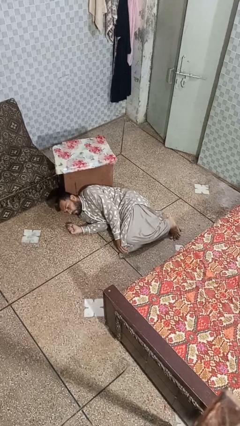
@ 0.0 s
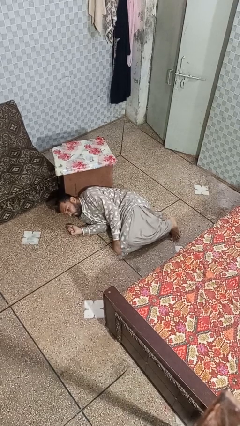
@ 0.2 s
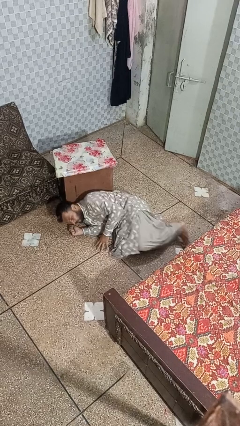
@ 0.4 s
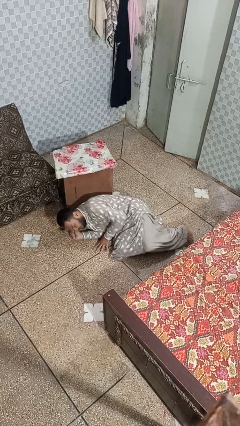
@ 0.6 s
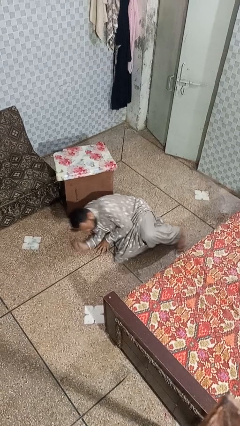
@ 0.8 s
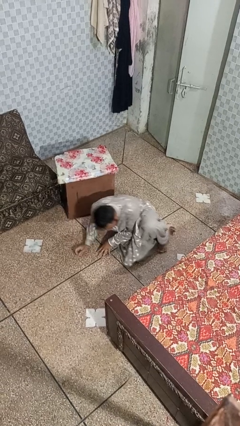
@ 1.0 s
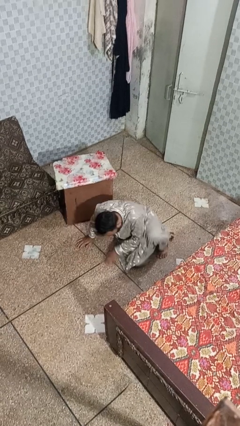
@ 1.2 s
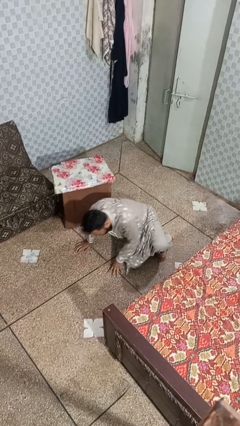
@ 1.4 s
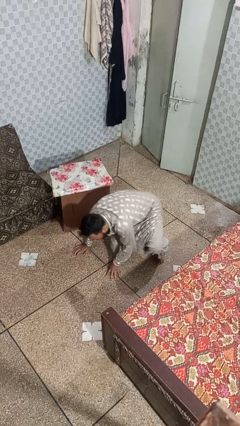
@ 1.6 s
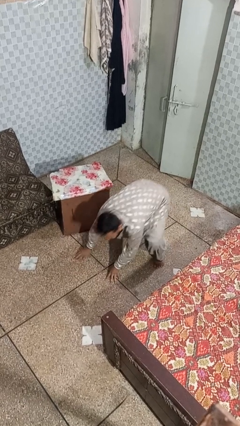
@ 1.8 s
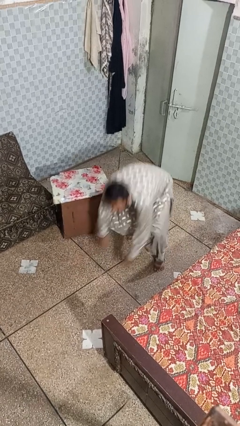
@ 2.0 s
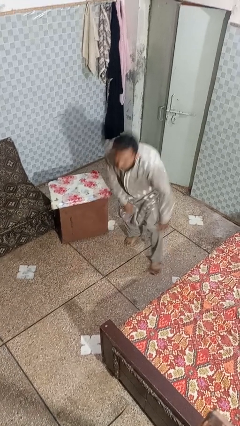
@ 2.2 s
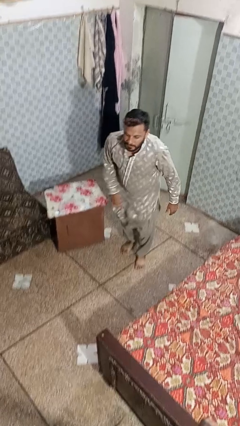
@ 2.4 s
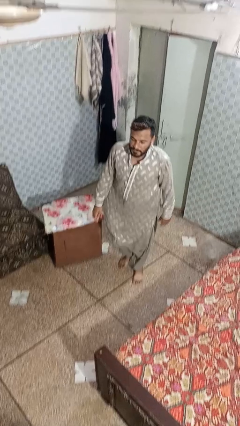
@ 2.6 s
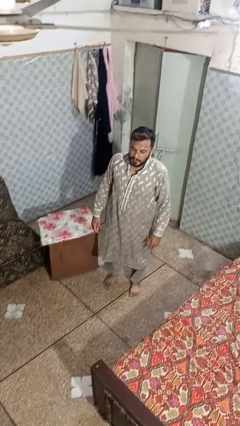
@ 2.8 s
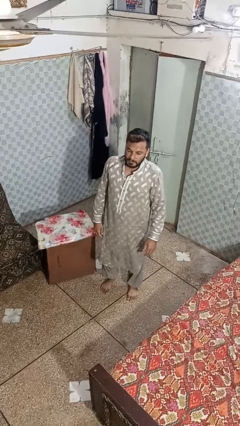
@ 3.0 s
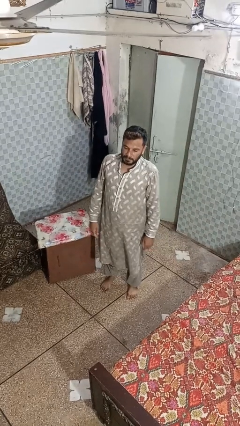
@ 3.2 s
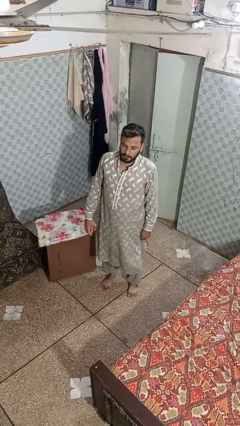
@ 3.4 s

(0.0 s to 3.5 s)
person stands up from floor

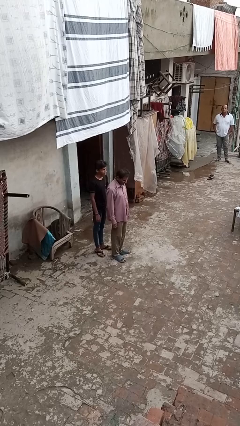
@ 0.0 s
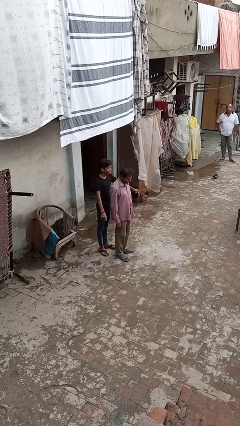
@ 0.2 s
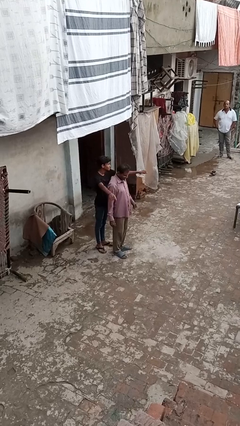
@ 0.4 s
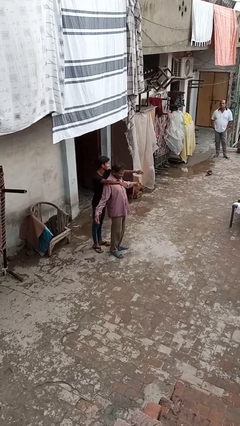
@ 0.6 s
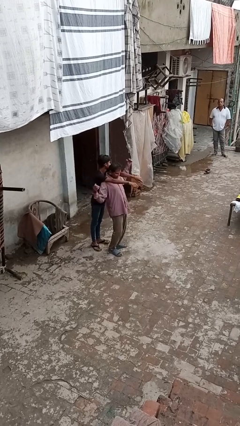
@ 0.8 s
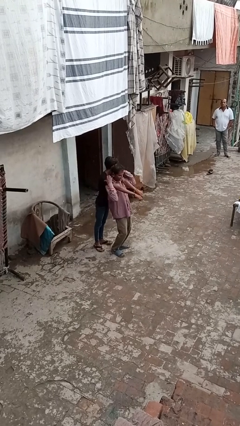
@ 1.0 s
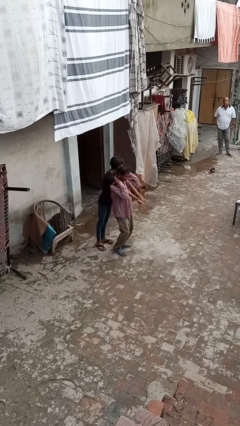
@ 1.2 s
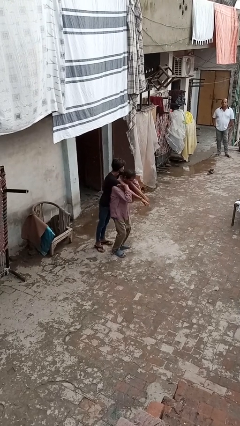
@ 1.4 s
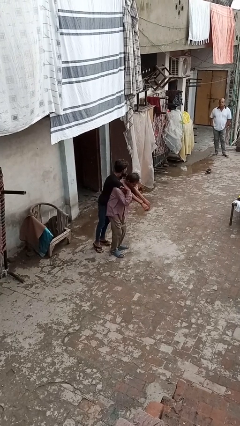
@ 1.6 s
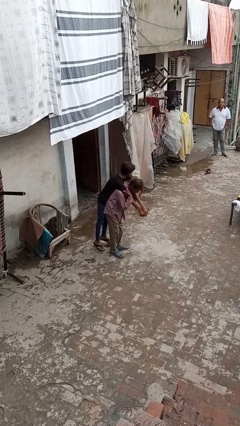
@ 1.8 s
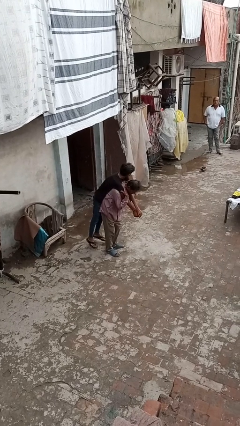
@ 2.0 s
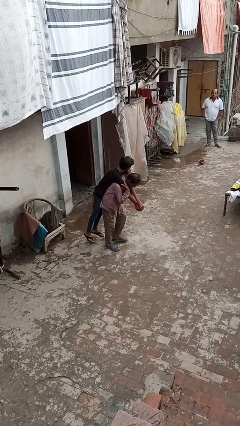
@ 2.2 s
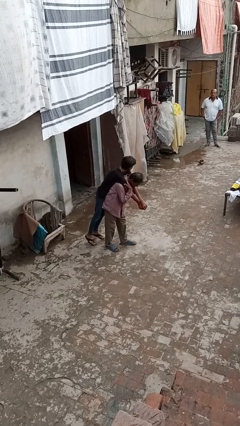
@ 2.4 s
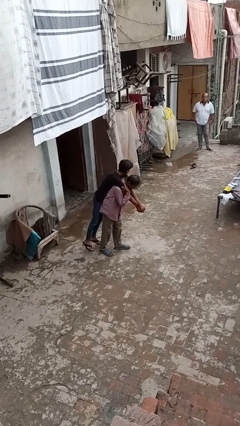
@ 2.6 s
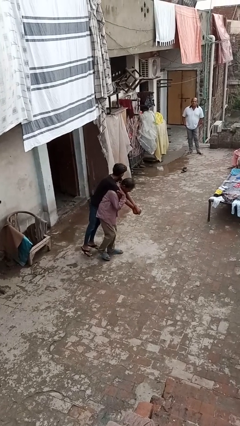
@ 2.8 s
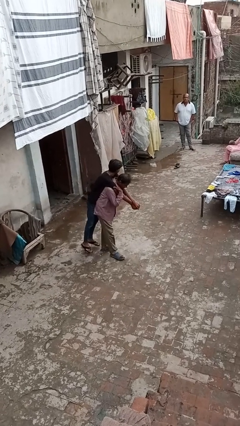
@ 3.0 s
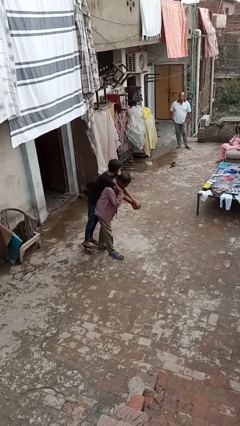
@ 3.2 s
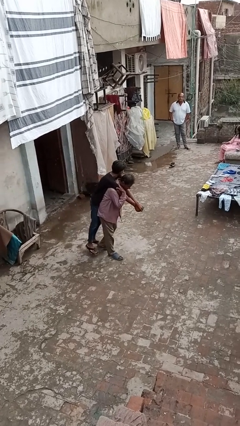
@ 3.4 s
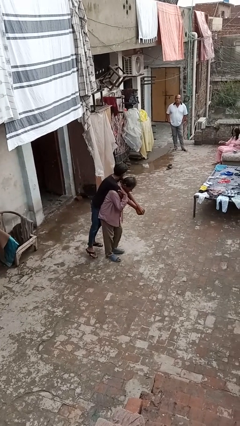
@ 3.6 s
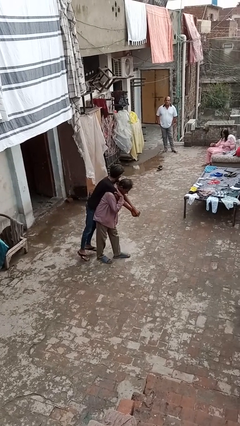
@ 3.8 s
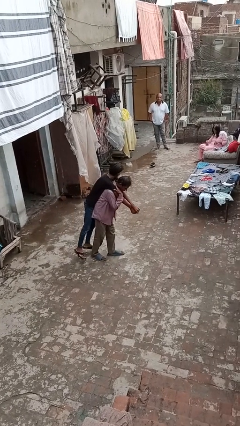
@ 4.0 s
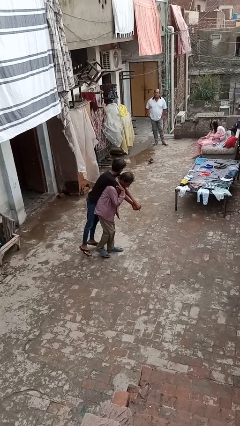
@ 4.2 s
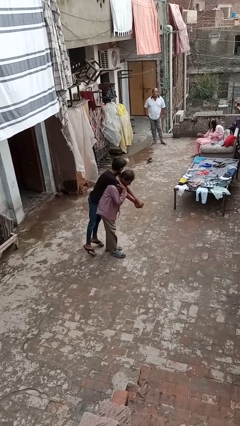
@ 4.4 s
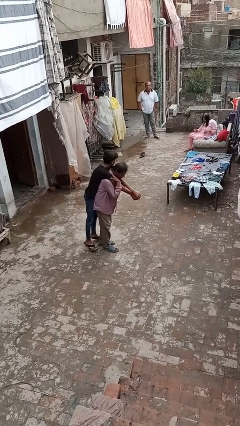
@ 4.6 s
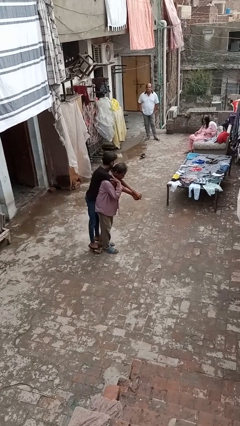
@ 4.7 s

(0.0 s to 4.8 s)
person carries person on back

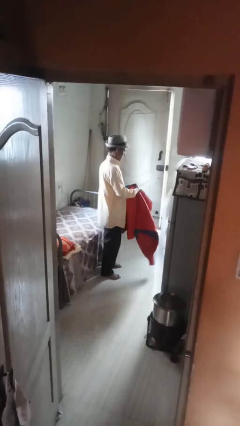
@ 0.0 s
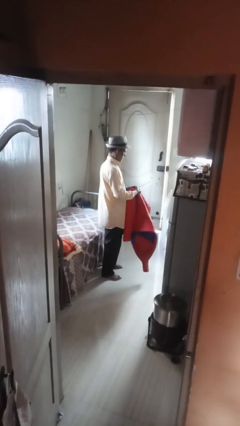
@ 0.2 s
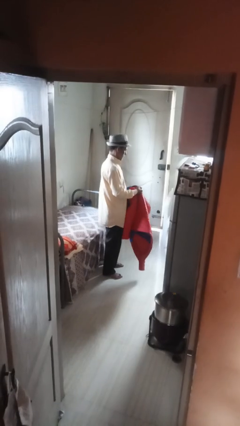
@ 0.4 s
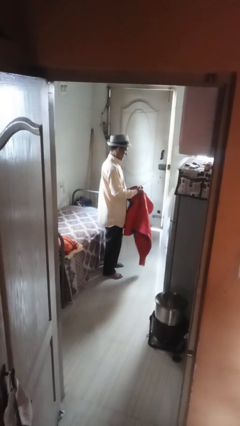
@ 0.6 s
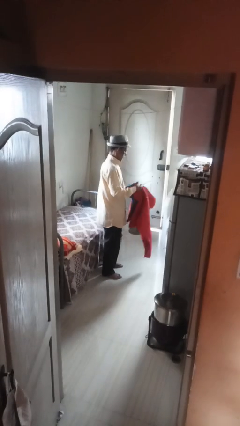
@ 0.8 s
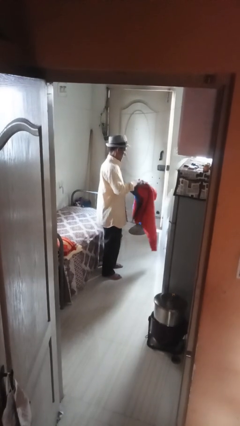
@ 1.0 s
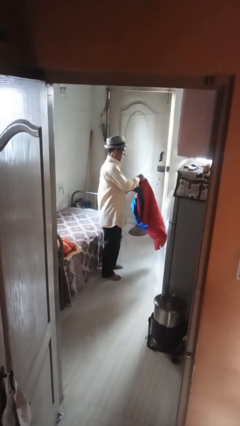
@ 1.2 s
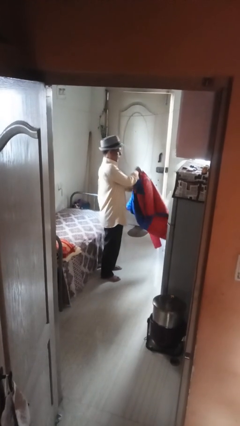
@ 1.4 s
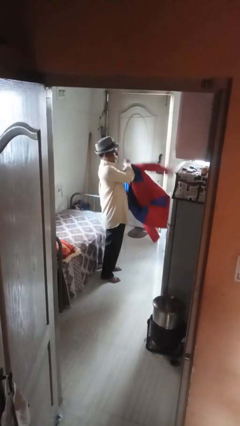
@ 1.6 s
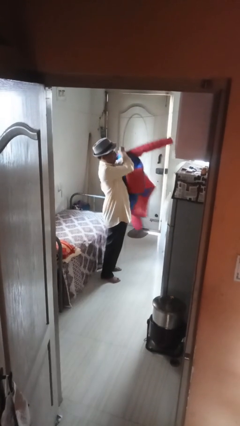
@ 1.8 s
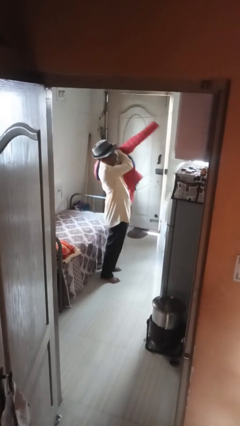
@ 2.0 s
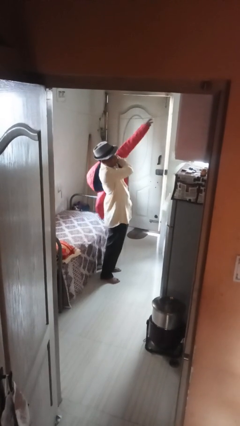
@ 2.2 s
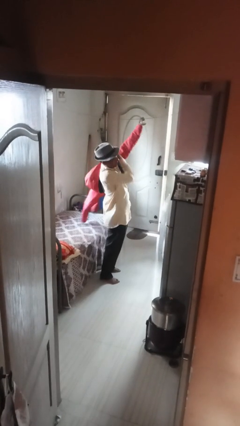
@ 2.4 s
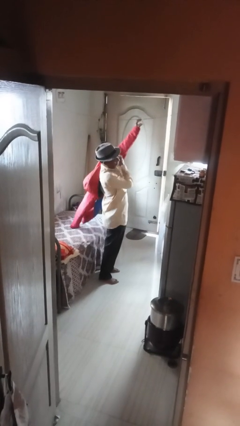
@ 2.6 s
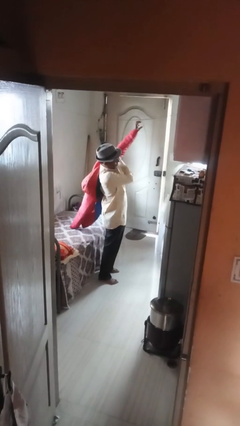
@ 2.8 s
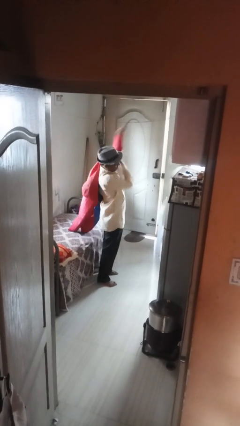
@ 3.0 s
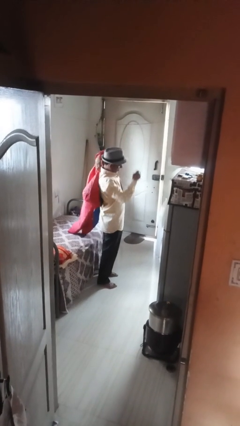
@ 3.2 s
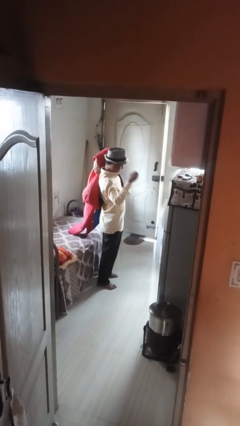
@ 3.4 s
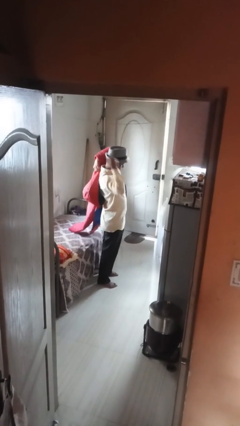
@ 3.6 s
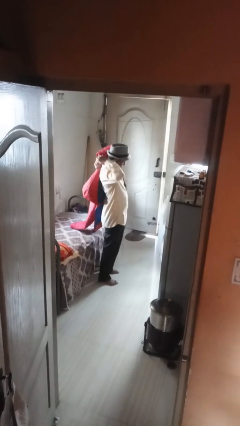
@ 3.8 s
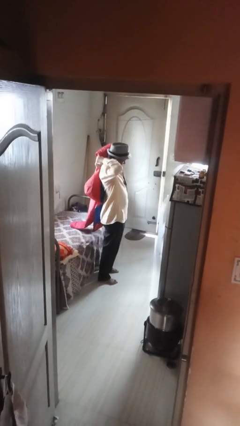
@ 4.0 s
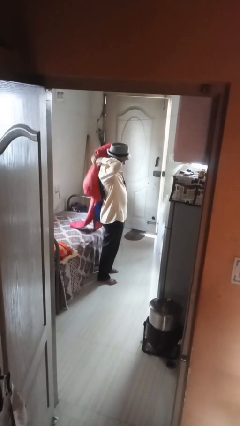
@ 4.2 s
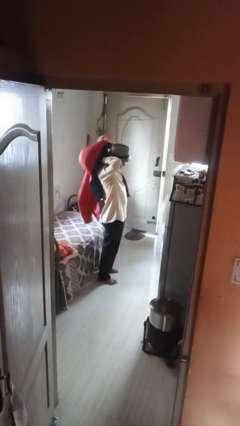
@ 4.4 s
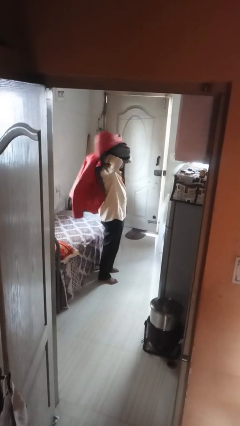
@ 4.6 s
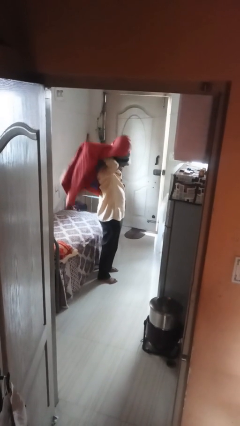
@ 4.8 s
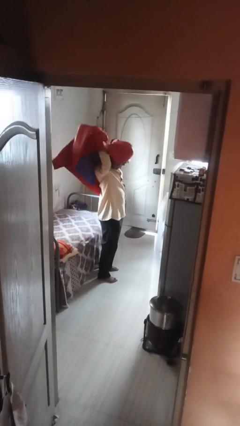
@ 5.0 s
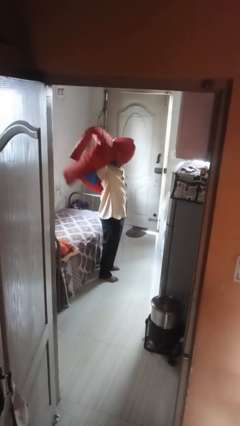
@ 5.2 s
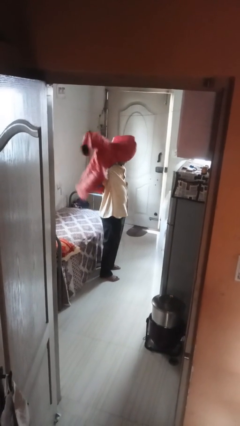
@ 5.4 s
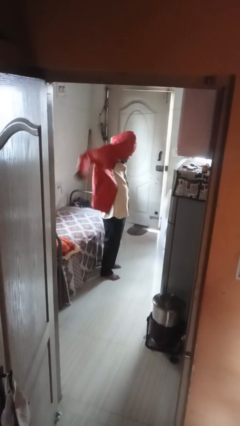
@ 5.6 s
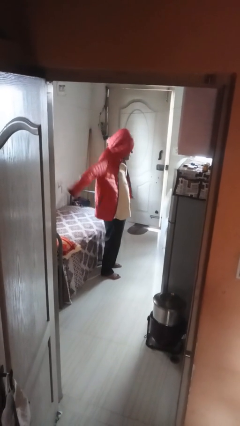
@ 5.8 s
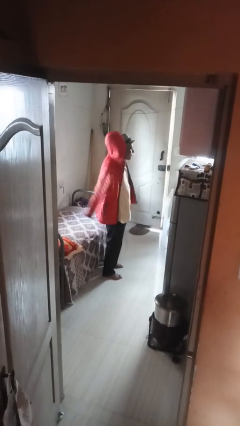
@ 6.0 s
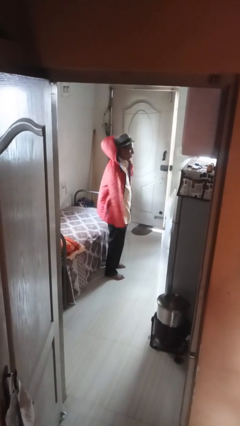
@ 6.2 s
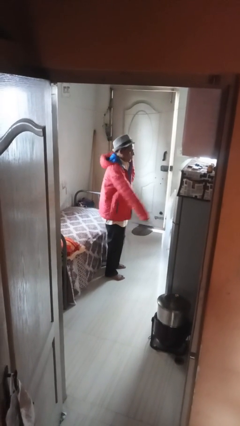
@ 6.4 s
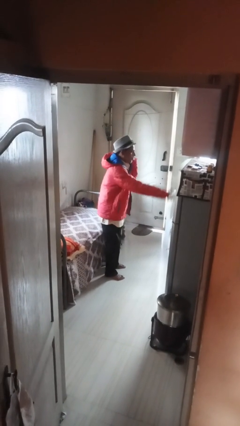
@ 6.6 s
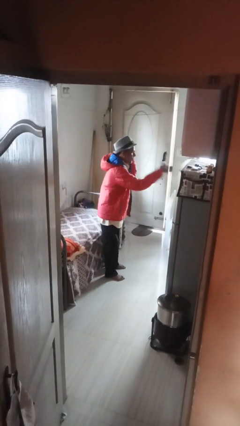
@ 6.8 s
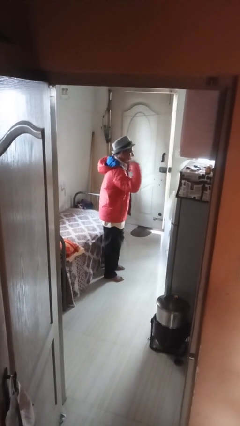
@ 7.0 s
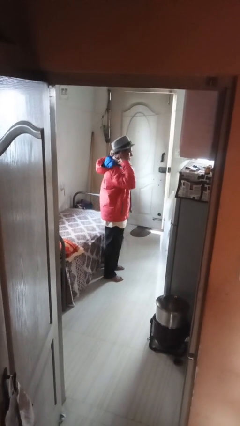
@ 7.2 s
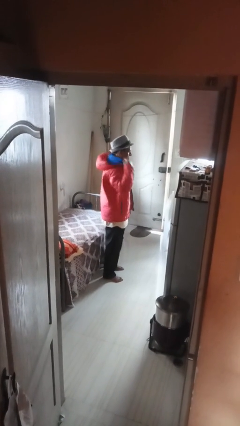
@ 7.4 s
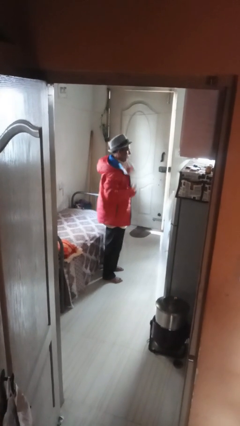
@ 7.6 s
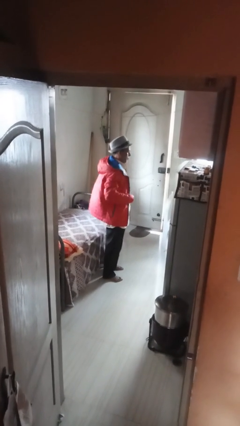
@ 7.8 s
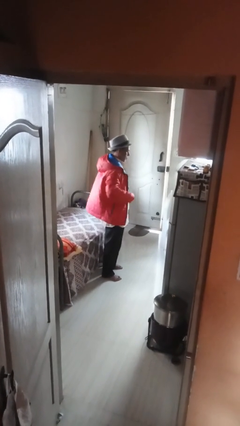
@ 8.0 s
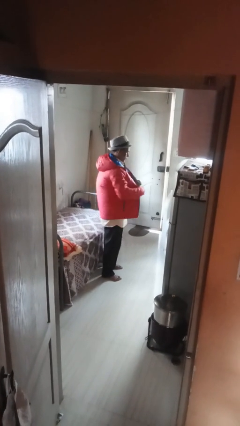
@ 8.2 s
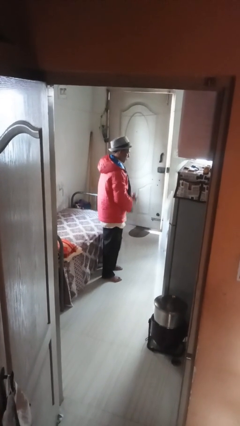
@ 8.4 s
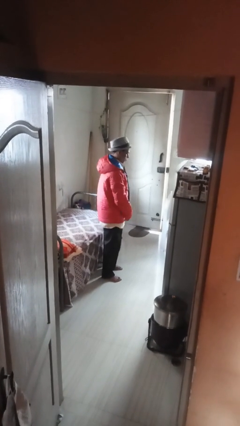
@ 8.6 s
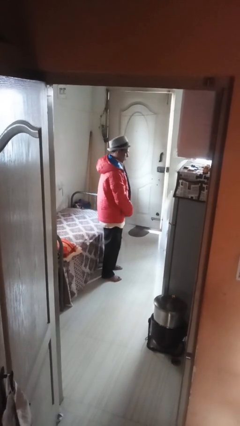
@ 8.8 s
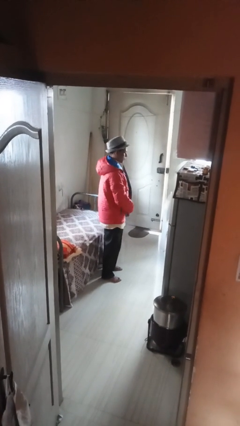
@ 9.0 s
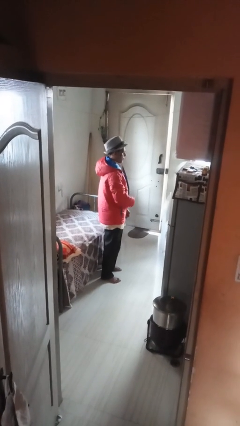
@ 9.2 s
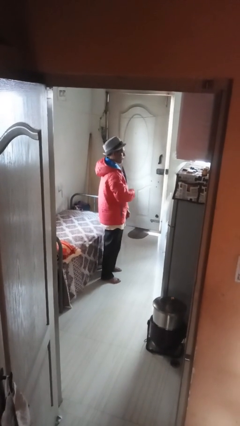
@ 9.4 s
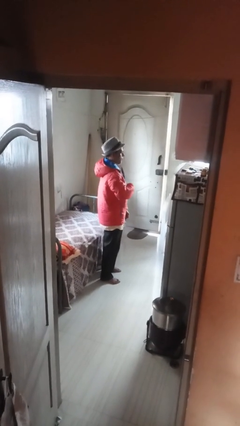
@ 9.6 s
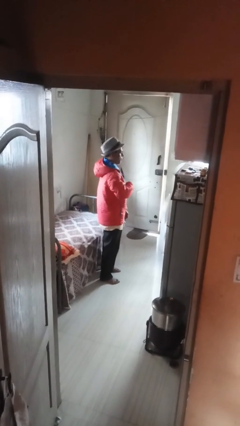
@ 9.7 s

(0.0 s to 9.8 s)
person puts on jacket

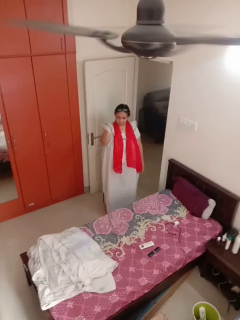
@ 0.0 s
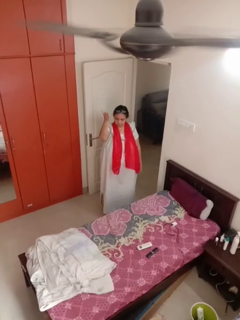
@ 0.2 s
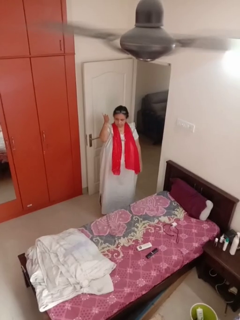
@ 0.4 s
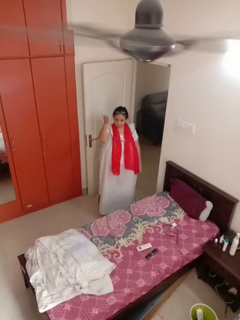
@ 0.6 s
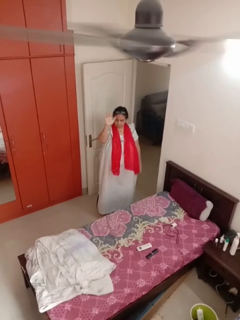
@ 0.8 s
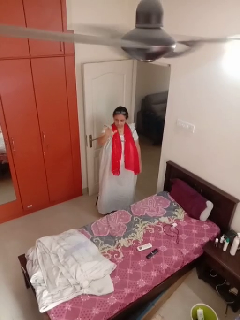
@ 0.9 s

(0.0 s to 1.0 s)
person gestures swipe up
